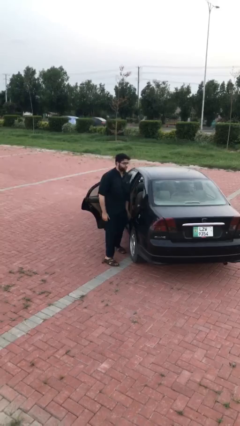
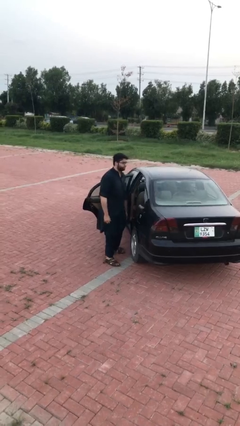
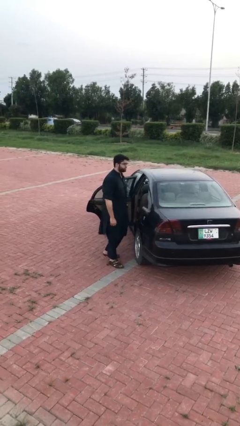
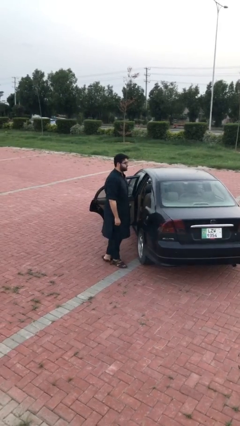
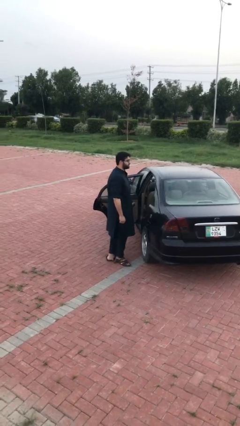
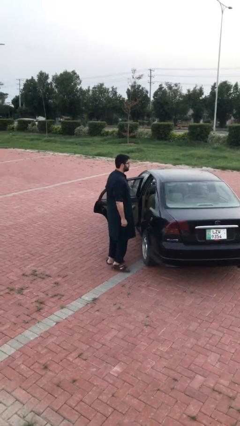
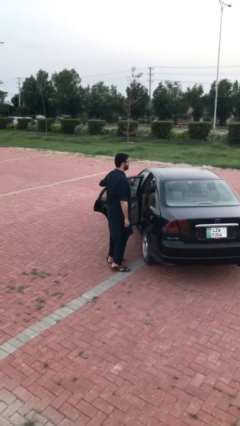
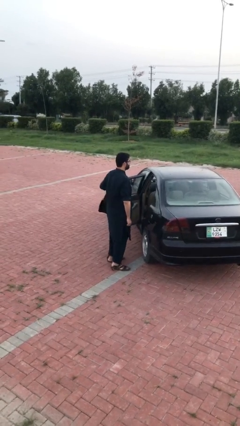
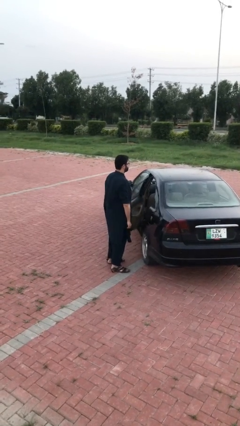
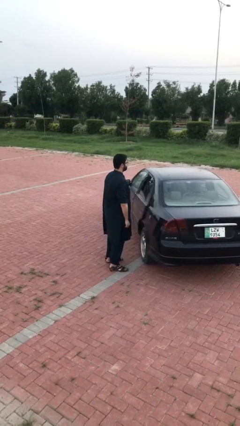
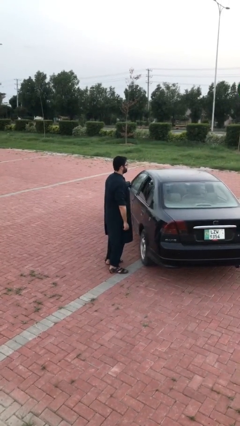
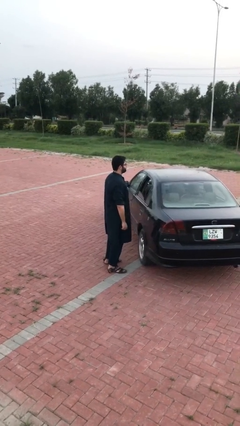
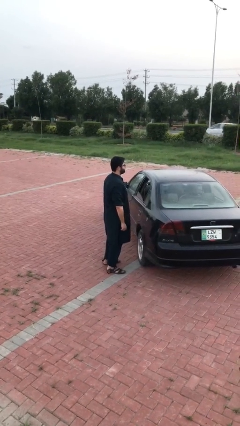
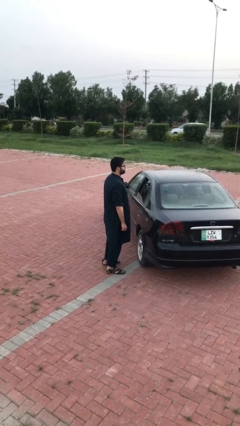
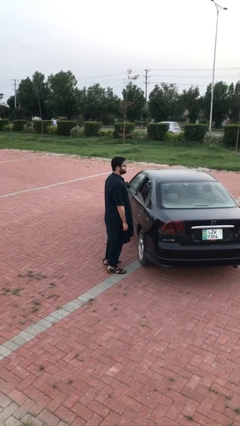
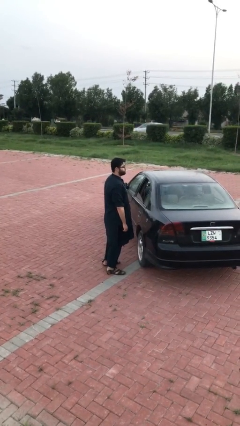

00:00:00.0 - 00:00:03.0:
person closes car door

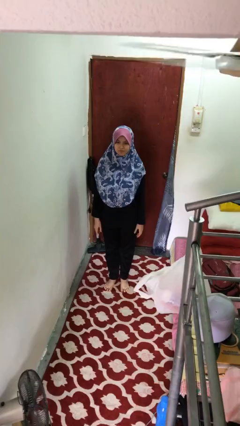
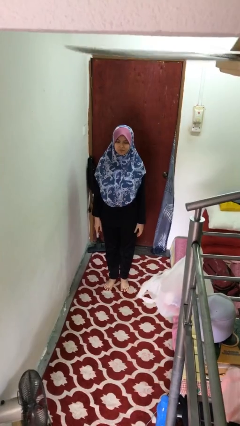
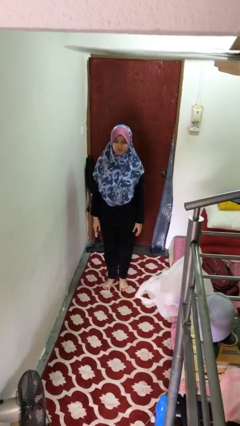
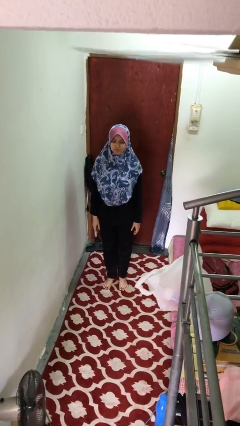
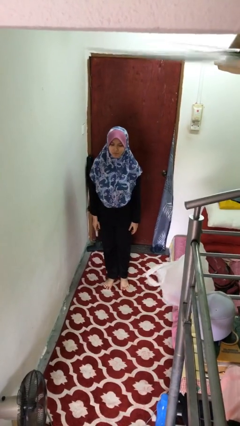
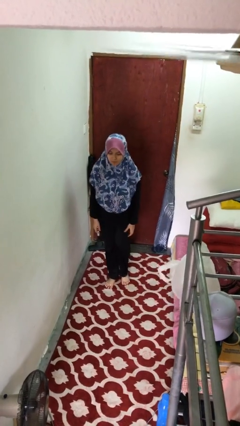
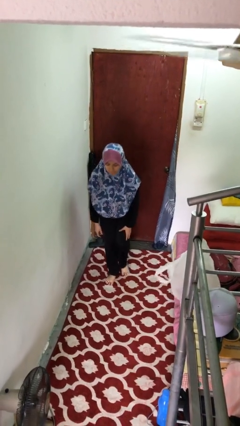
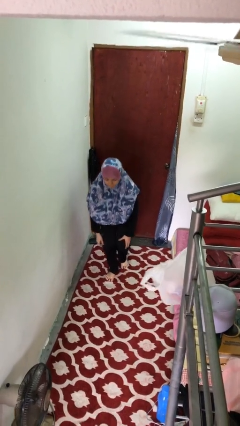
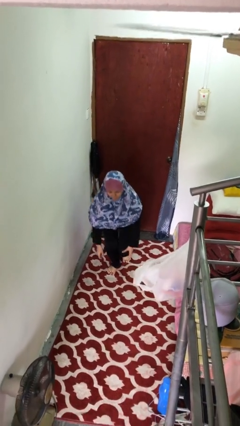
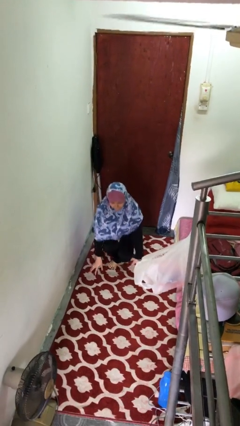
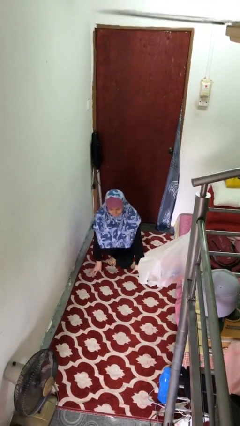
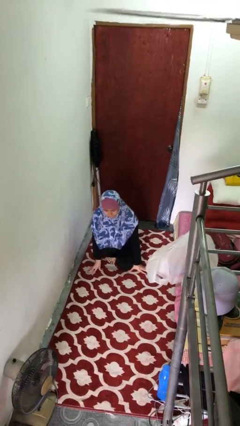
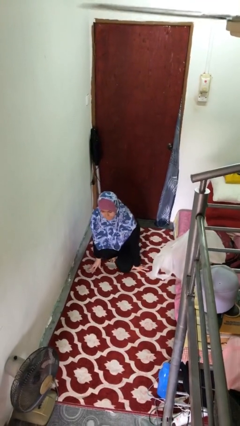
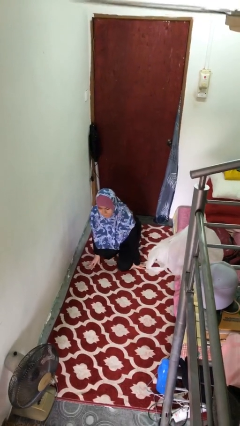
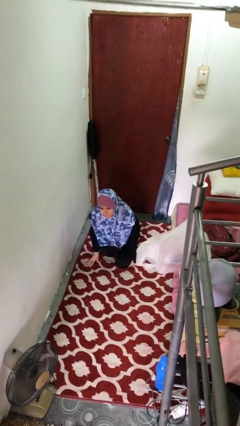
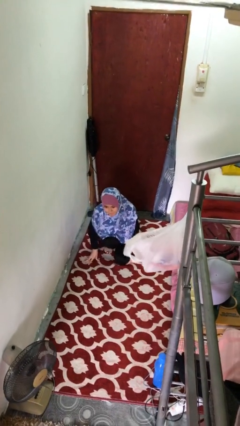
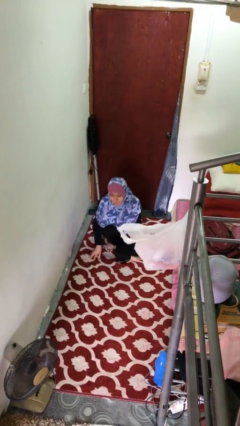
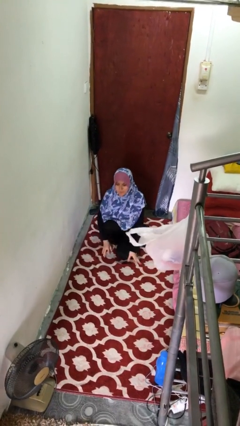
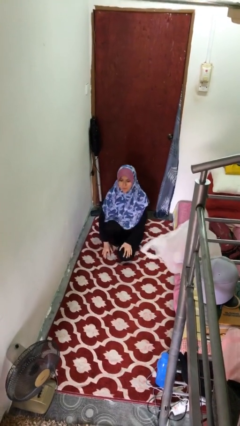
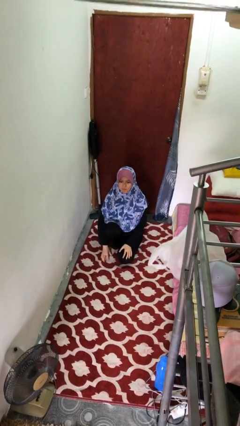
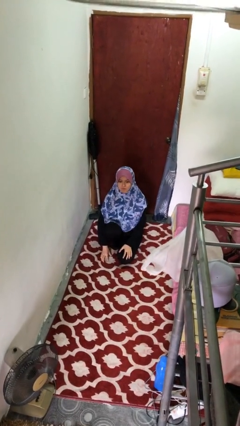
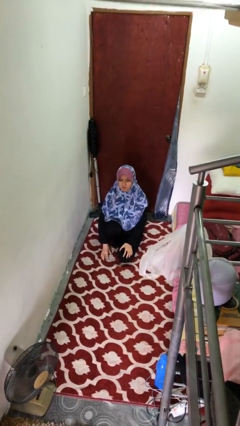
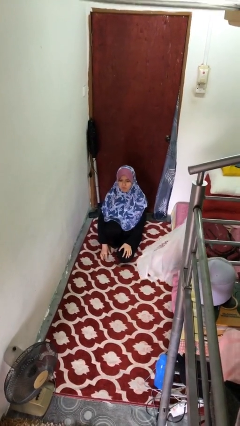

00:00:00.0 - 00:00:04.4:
person kneels

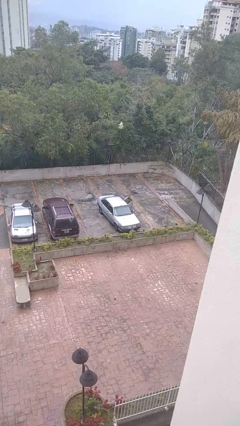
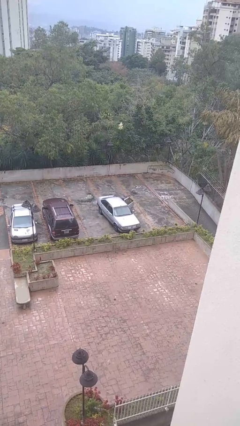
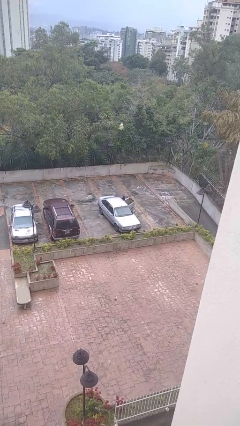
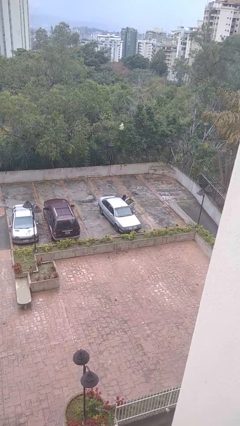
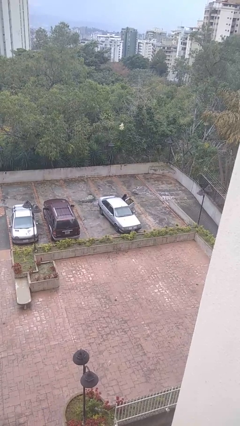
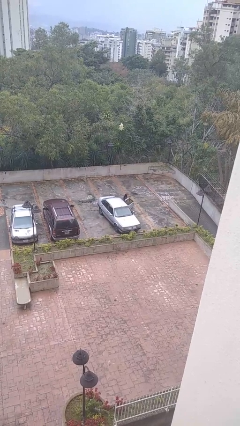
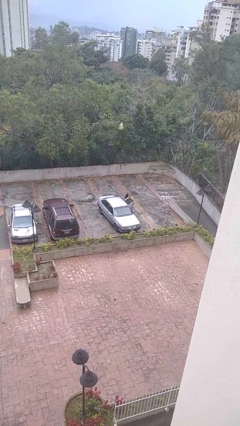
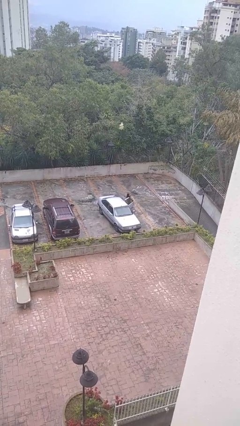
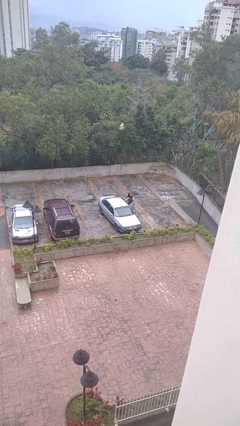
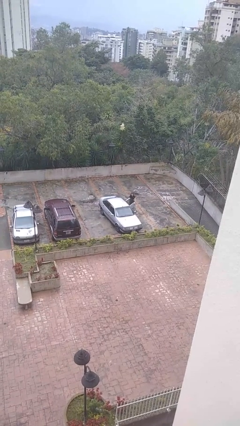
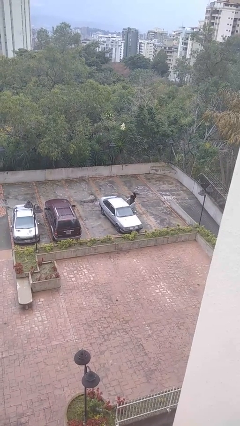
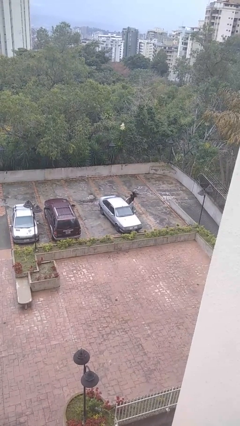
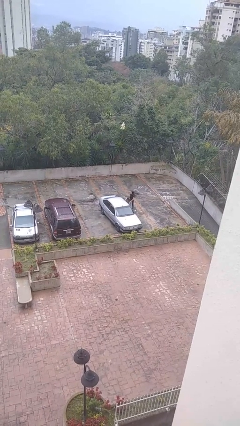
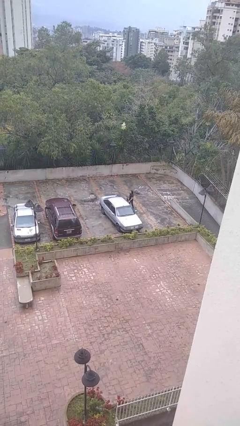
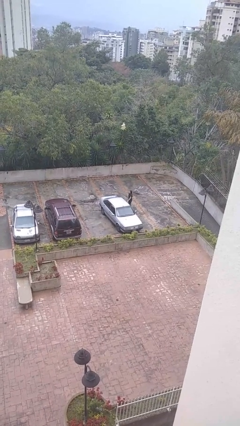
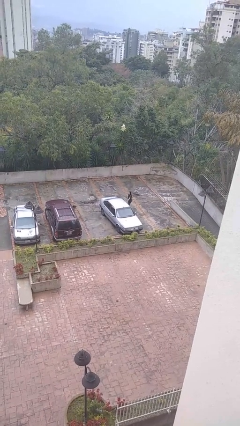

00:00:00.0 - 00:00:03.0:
car drops off person

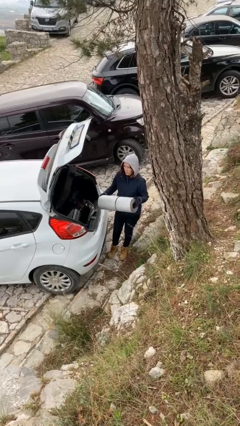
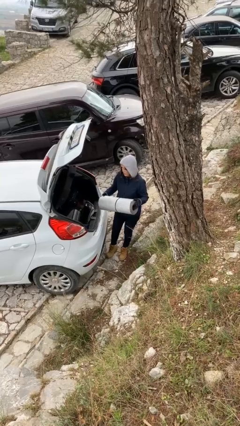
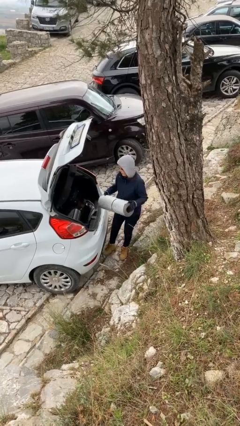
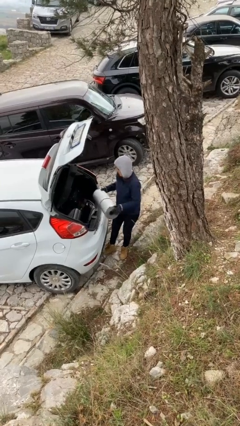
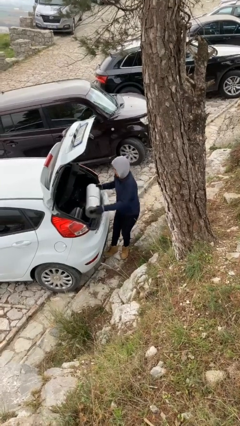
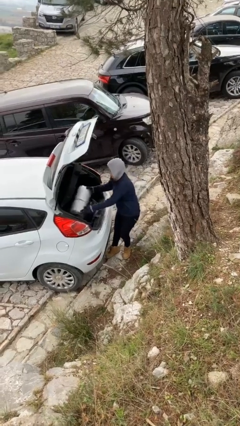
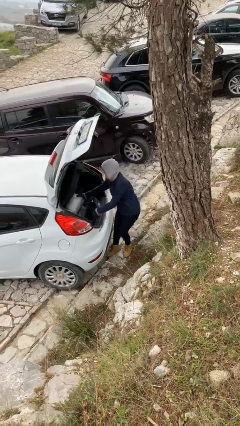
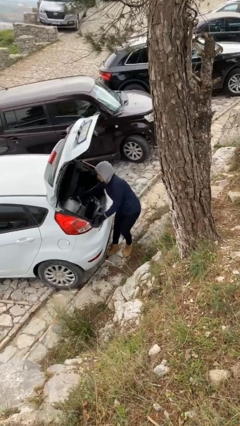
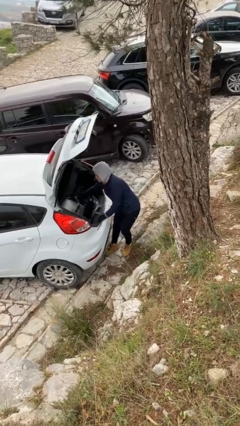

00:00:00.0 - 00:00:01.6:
person loads car

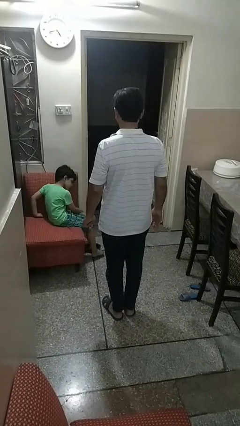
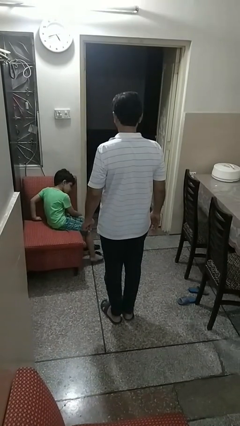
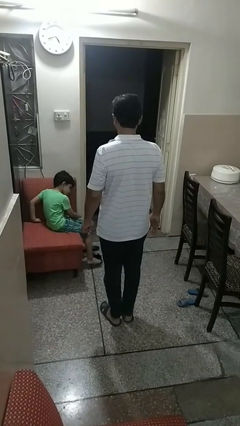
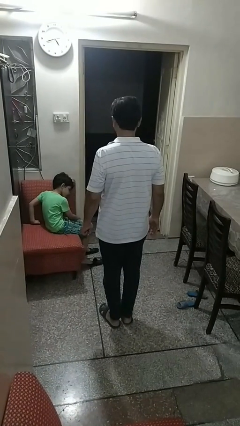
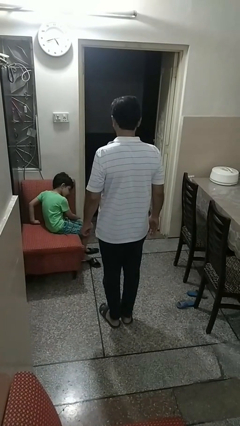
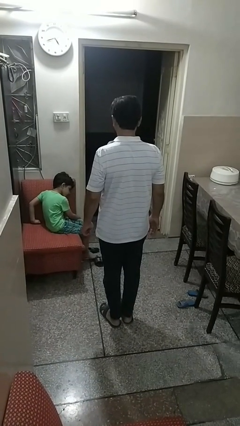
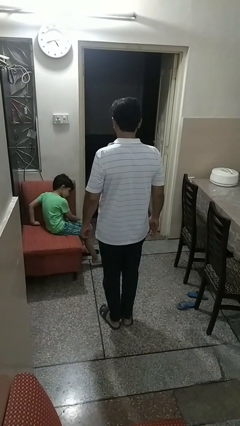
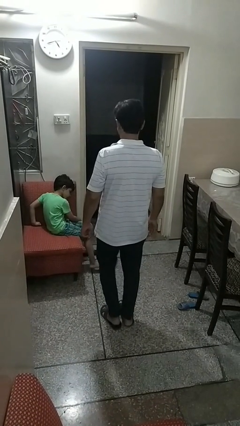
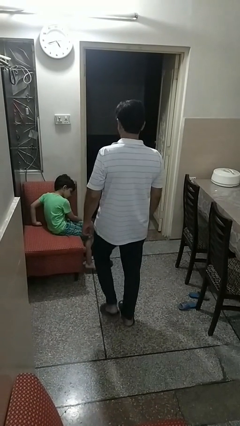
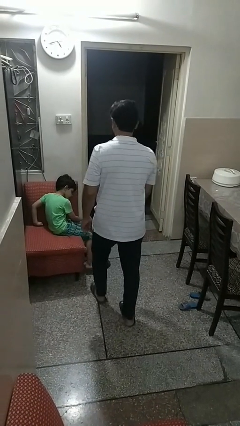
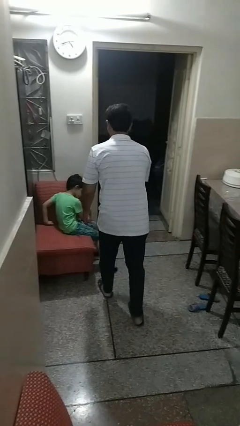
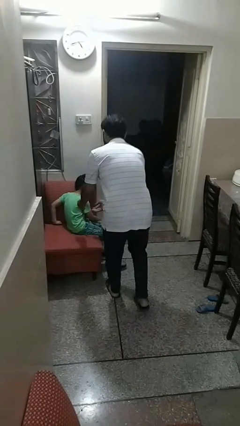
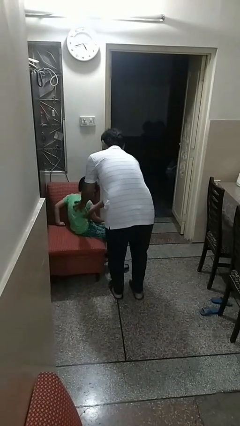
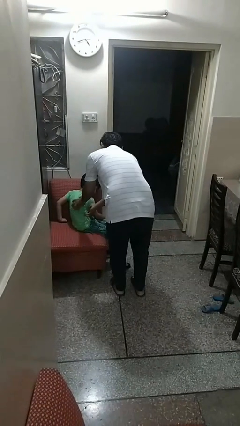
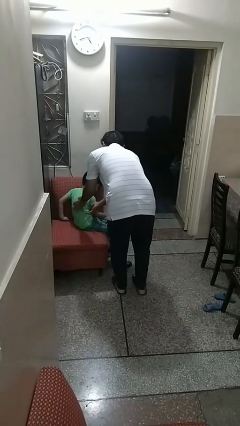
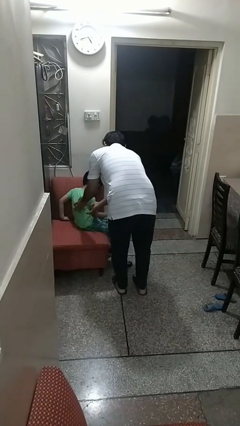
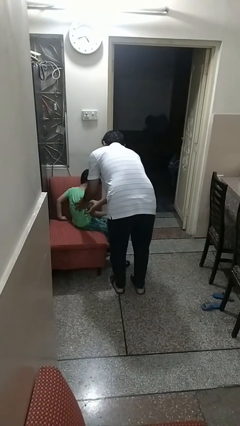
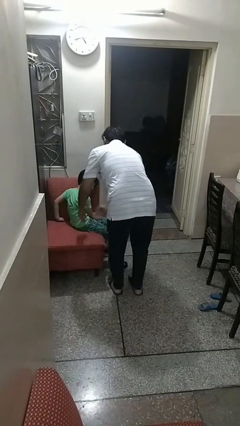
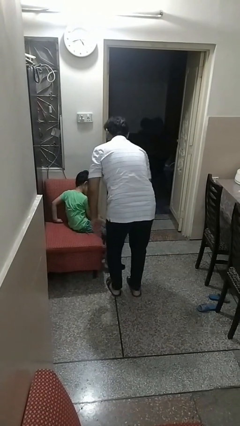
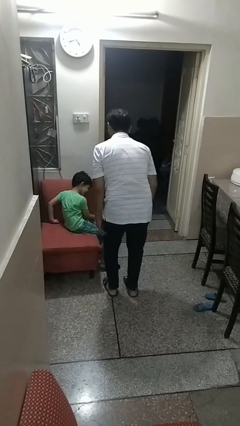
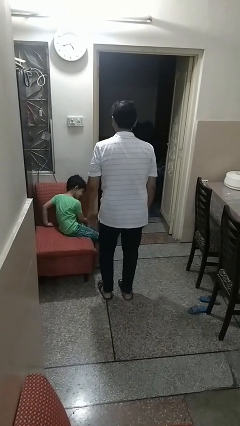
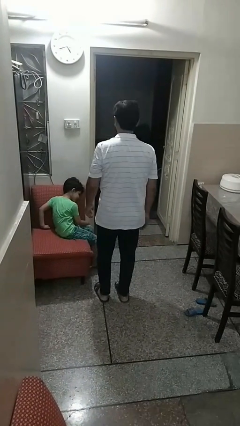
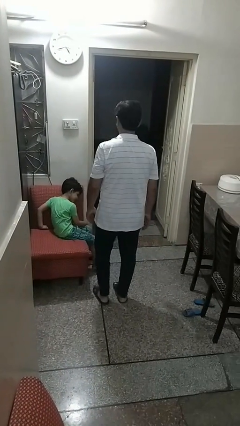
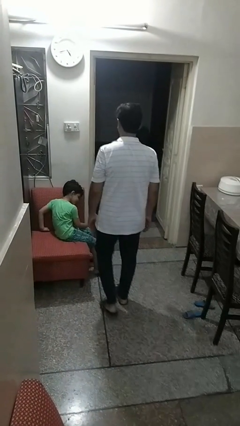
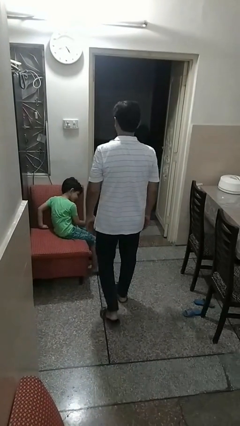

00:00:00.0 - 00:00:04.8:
person tickles person

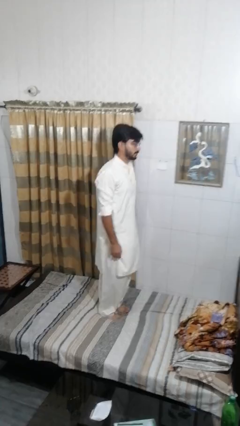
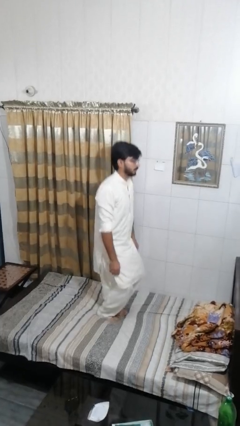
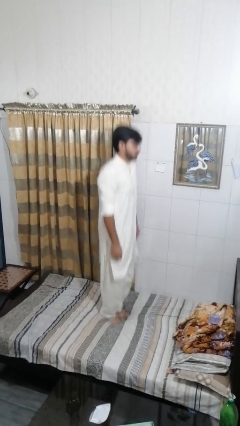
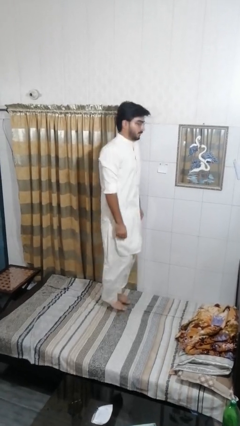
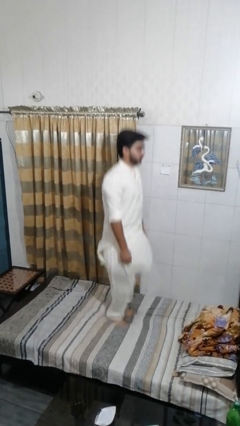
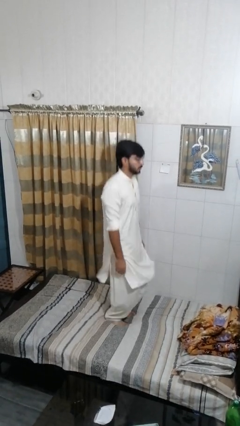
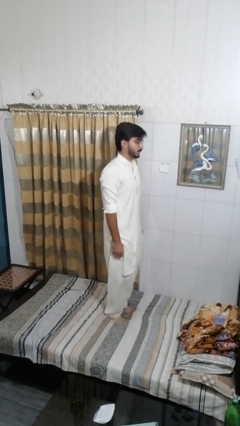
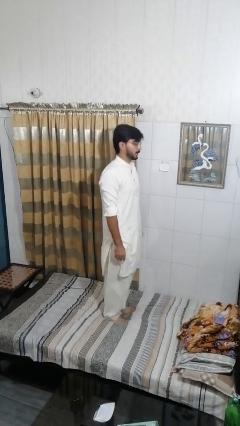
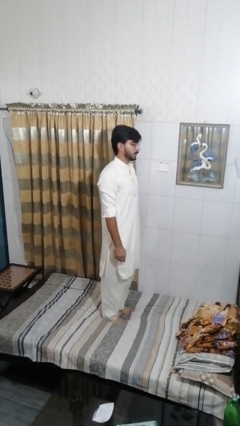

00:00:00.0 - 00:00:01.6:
person jumps on bed
